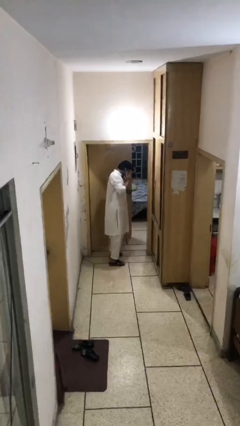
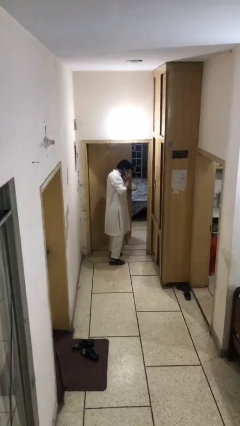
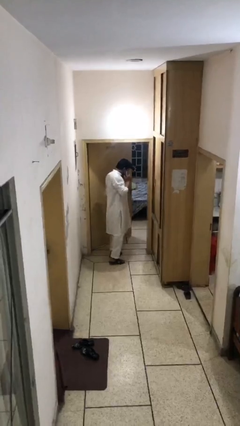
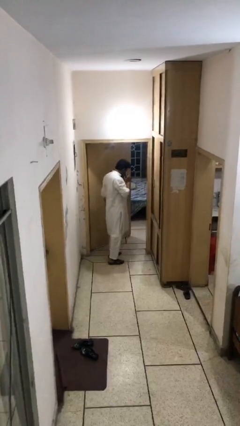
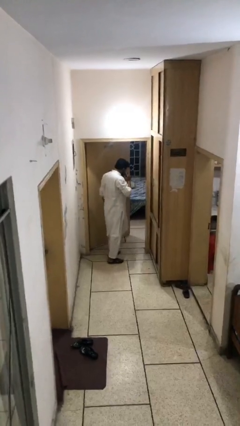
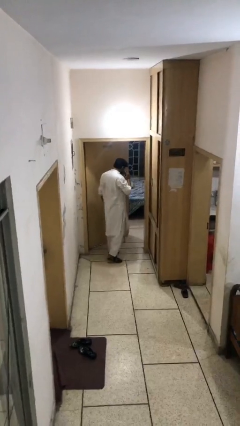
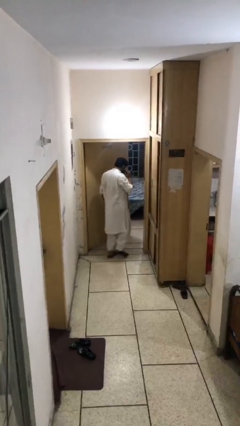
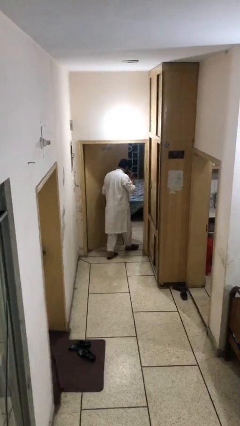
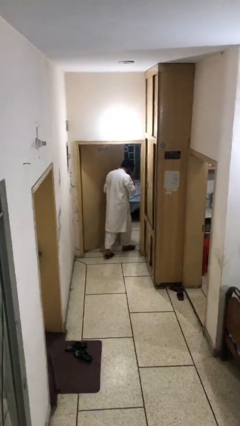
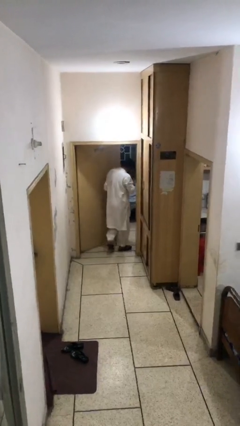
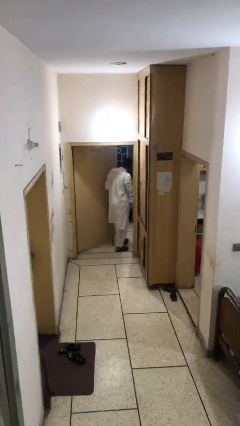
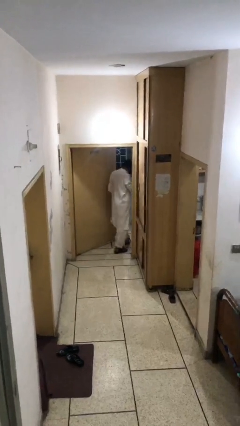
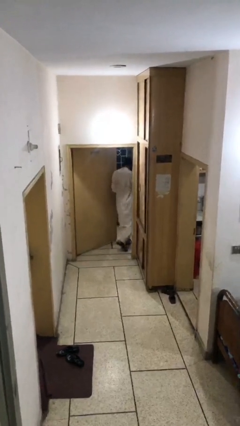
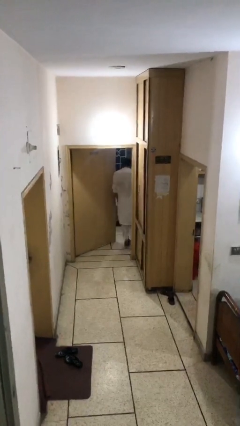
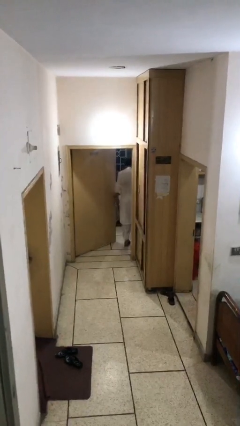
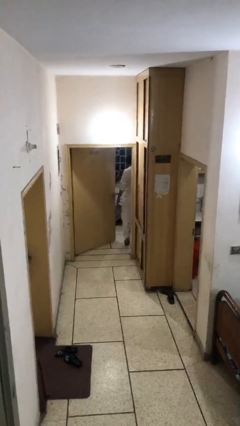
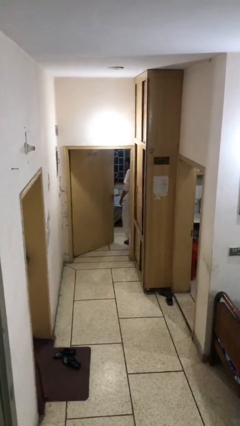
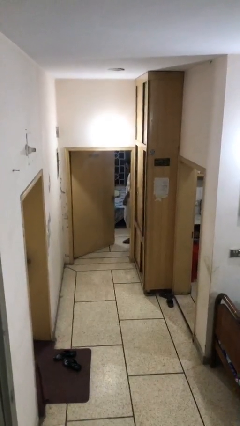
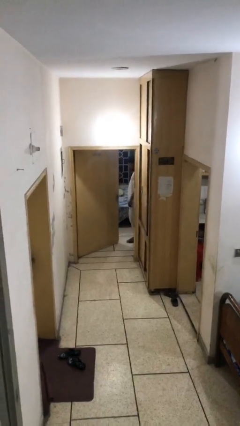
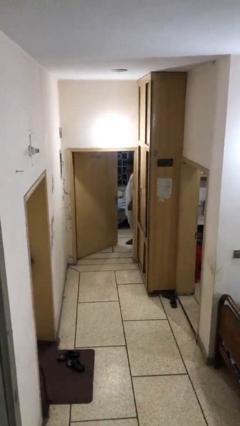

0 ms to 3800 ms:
person exits scene through structure

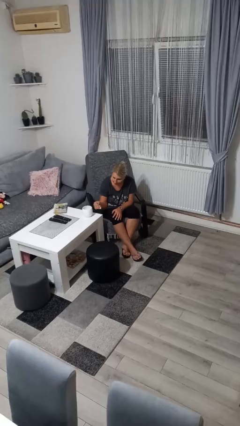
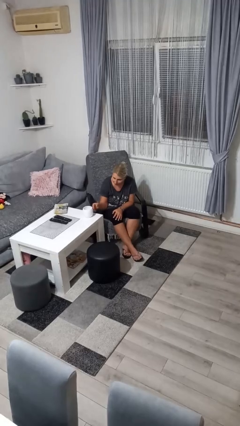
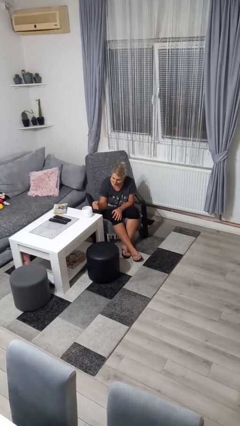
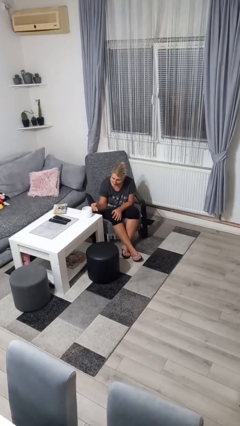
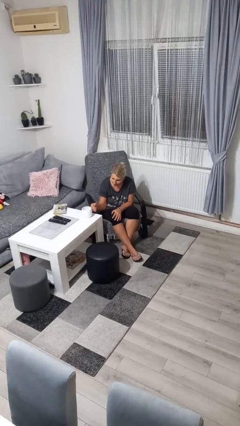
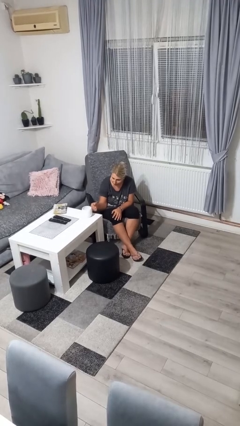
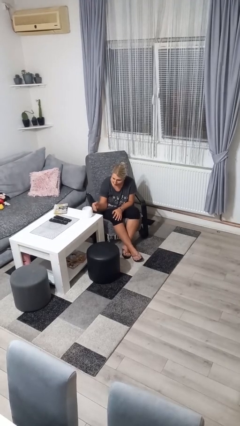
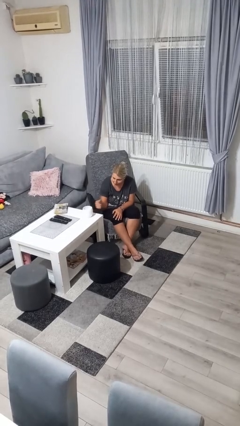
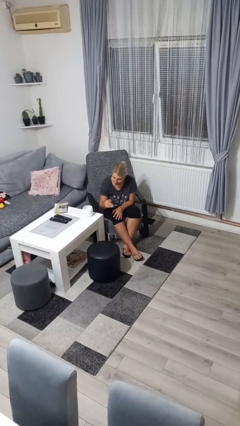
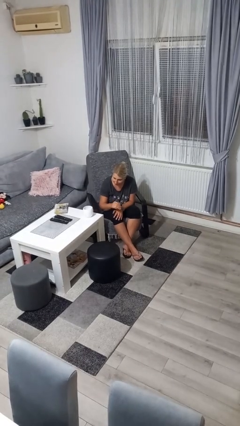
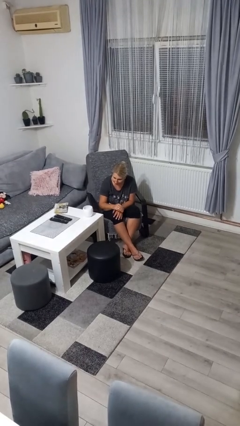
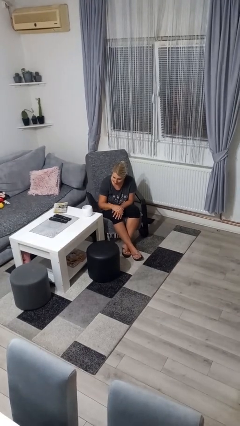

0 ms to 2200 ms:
person taps object with finger

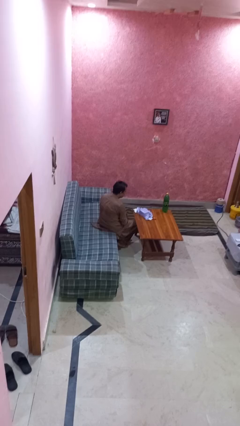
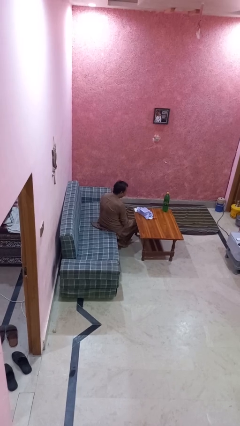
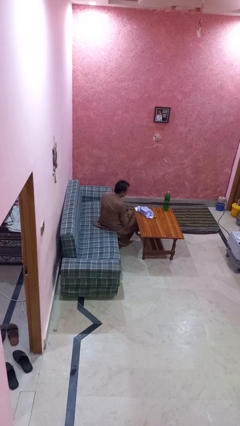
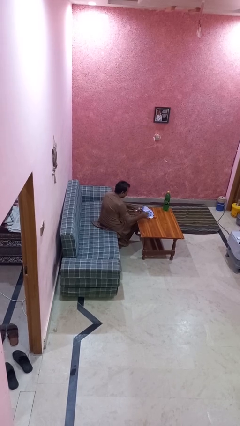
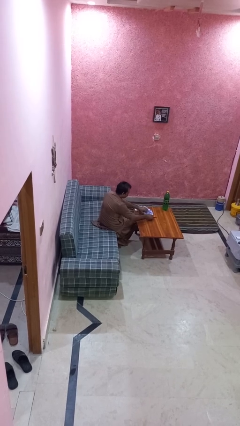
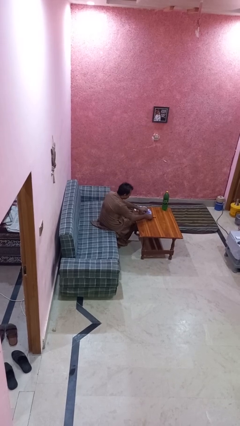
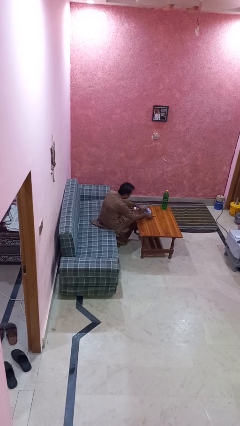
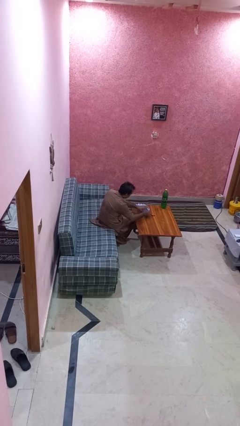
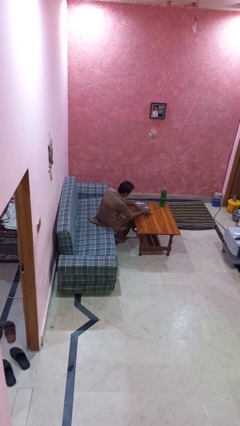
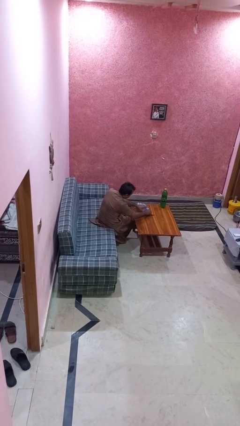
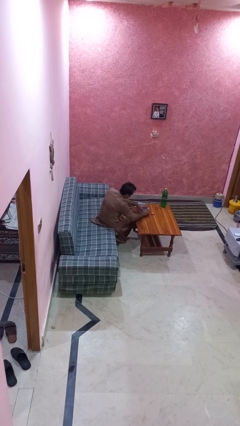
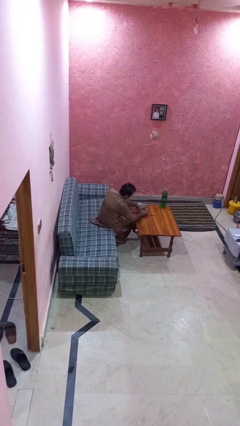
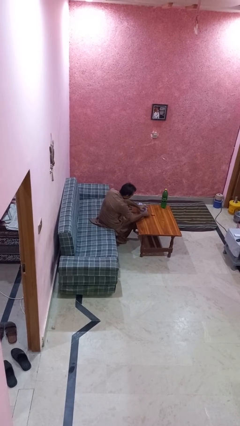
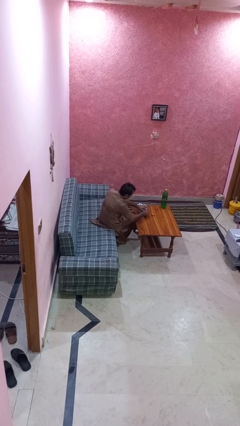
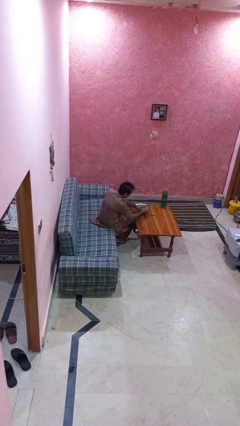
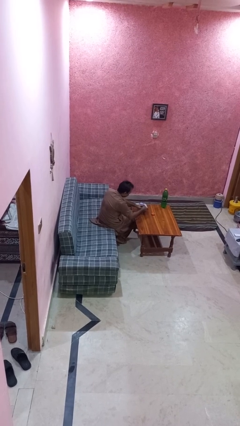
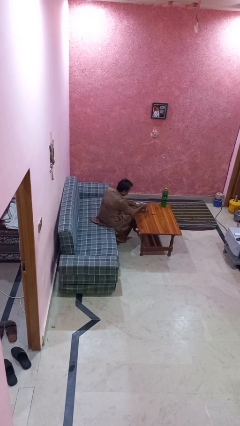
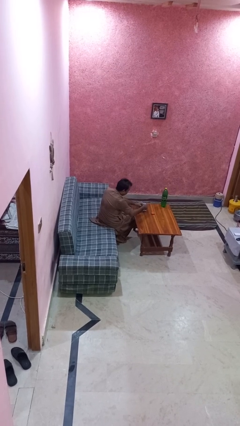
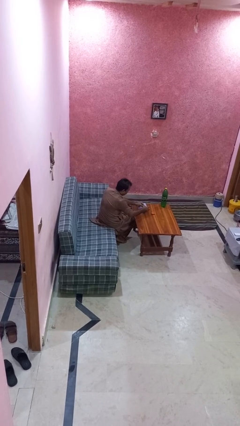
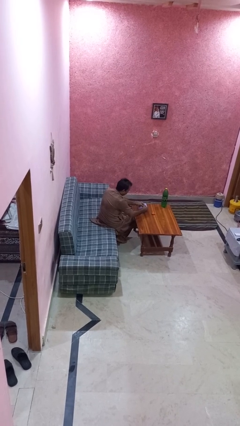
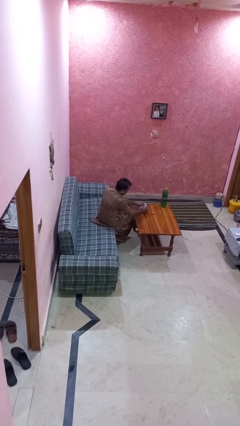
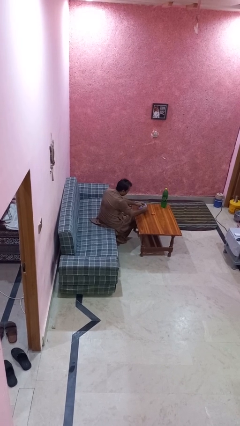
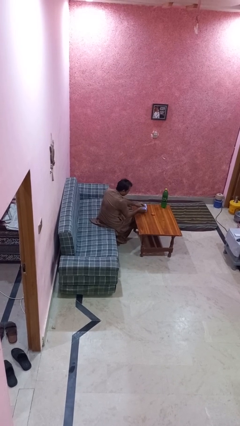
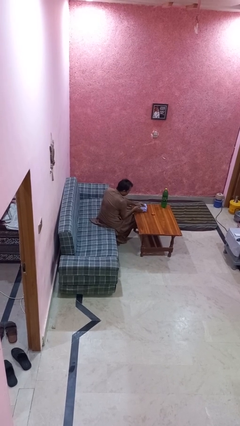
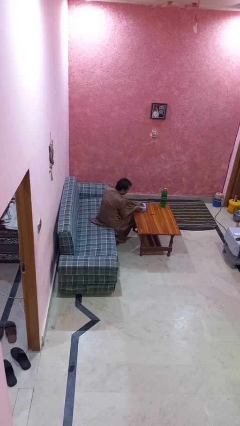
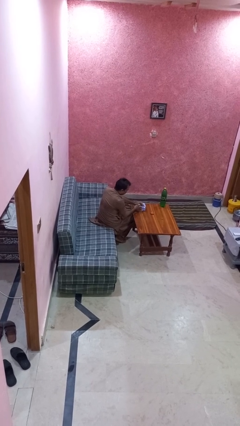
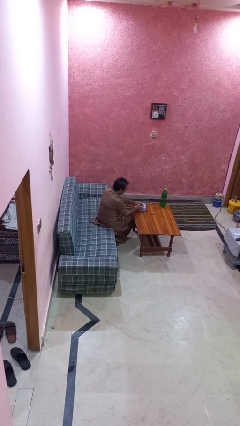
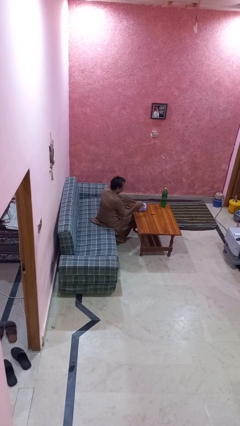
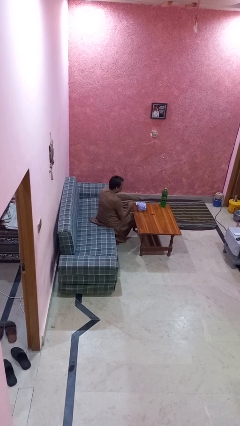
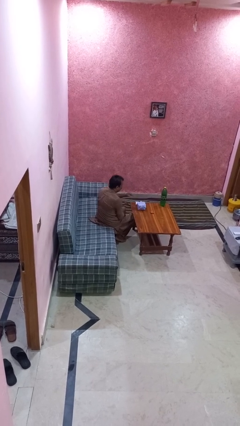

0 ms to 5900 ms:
person wraps box

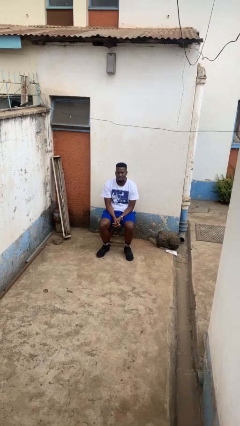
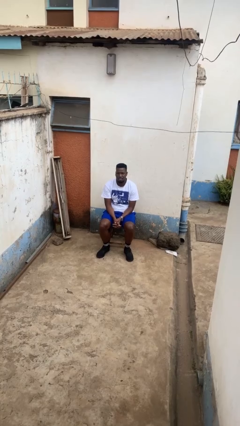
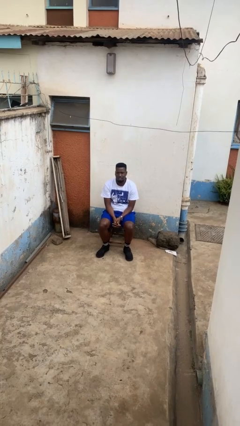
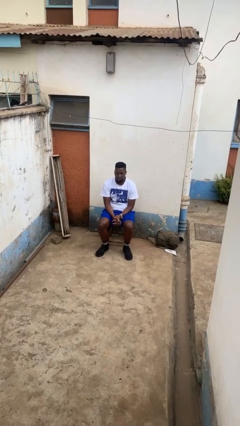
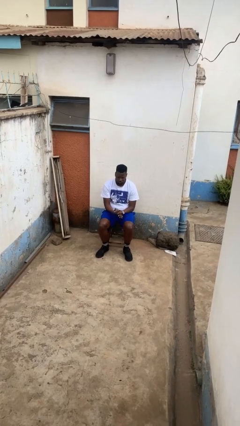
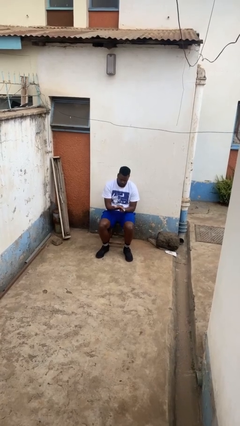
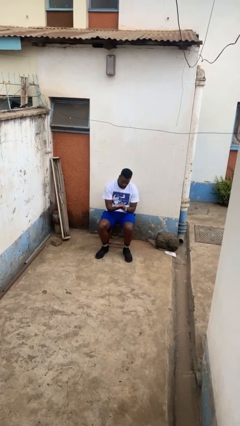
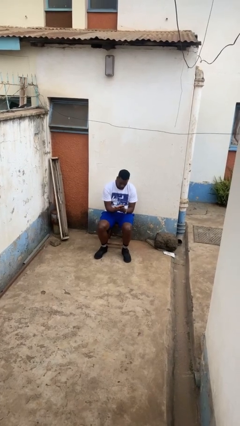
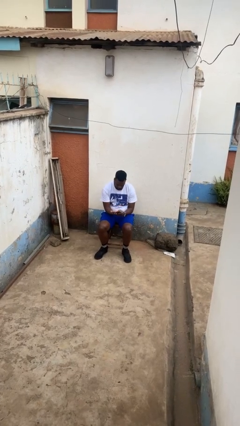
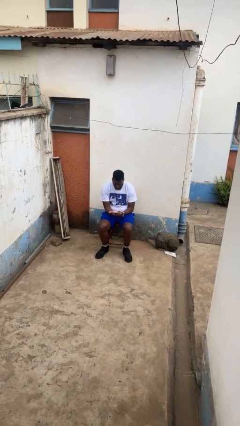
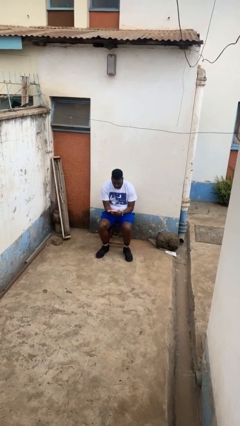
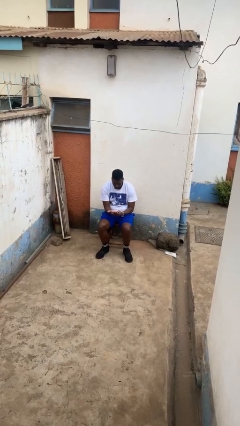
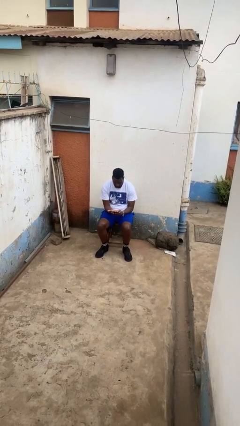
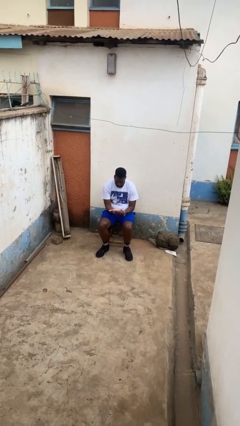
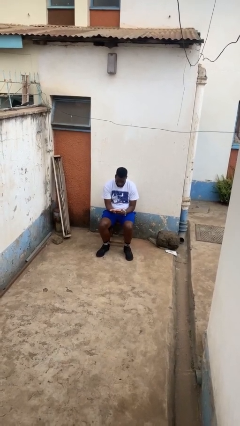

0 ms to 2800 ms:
person looks at hands in lap

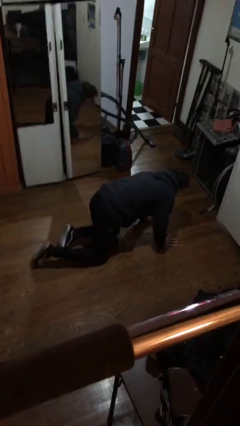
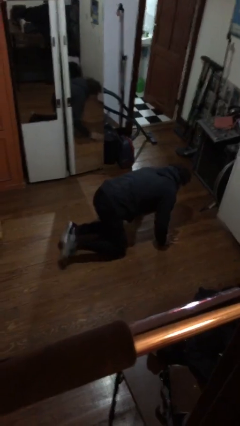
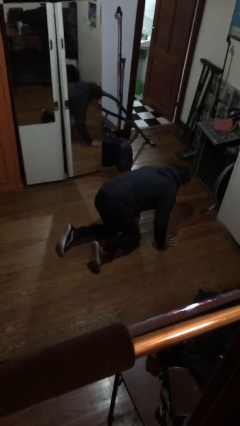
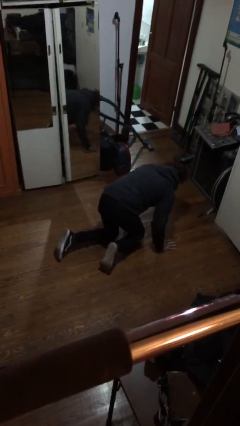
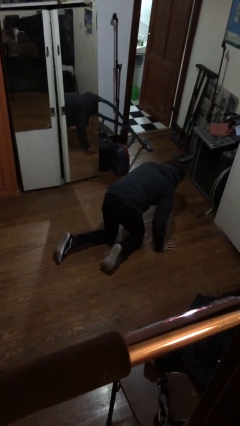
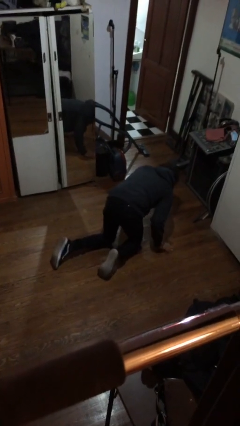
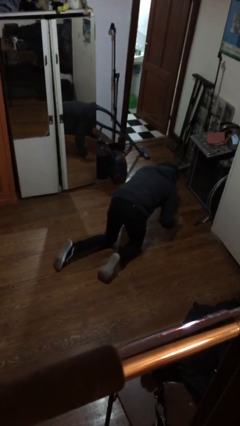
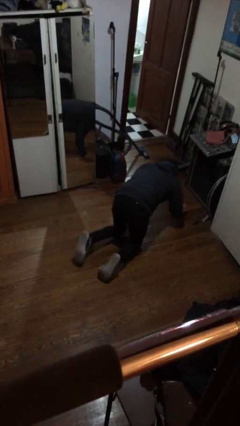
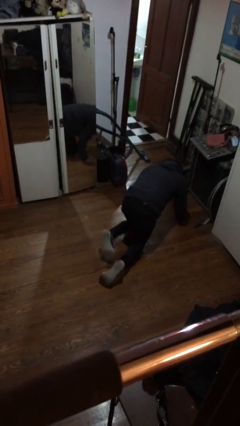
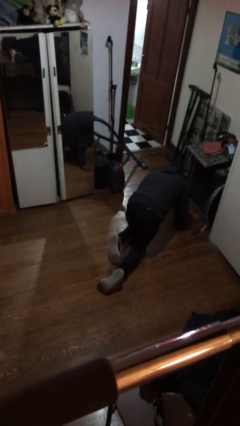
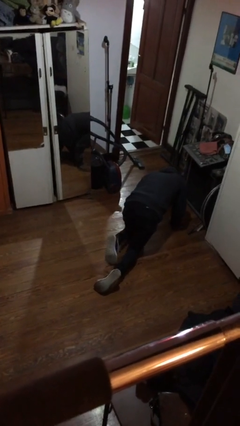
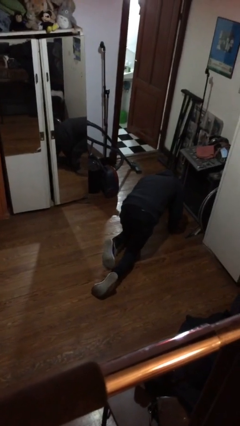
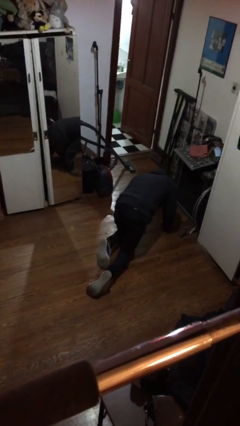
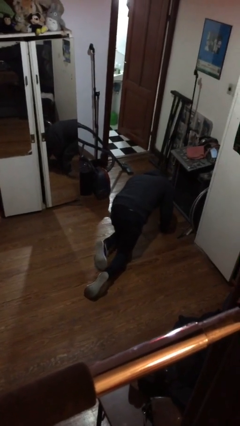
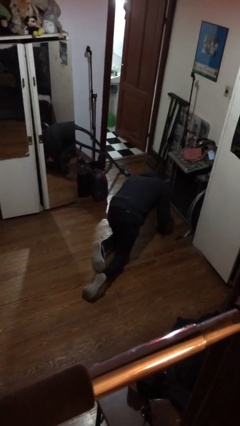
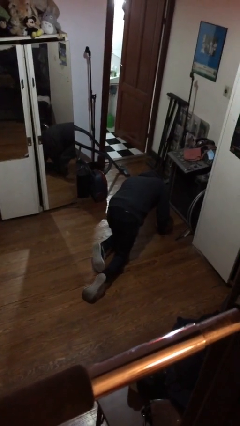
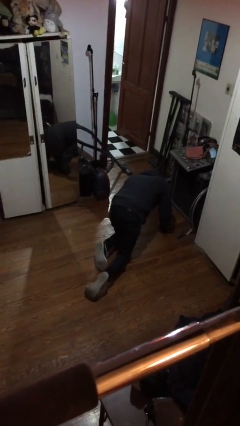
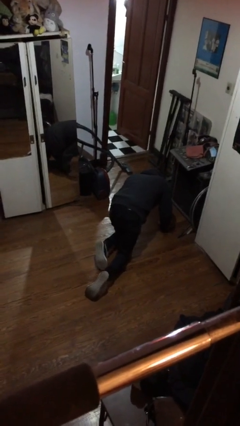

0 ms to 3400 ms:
person crawls
